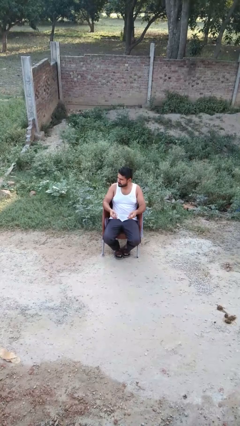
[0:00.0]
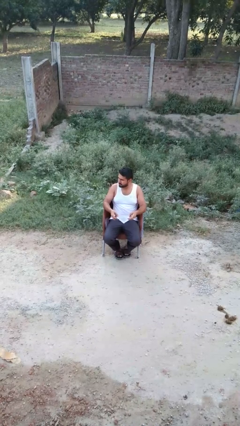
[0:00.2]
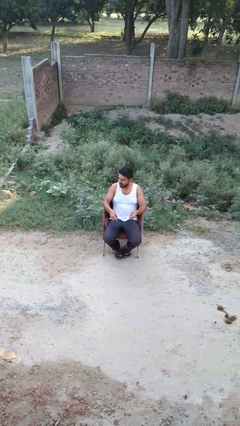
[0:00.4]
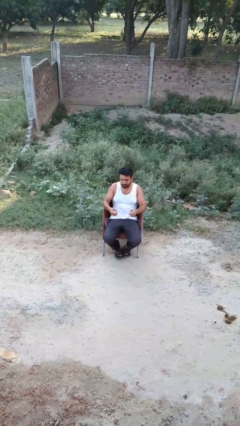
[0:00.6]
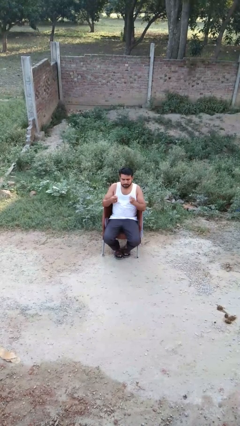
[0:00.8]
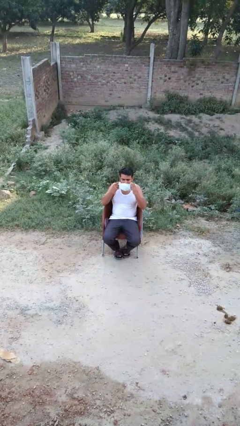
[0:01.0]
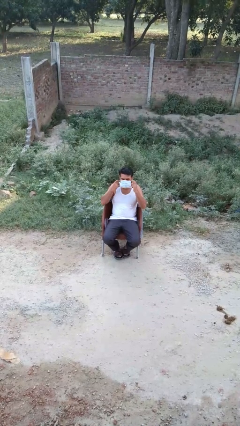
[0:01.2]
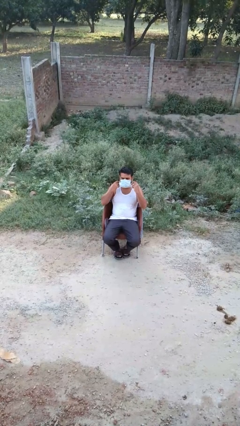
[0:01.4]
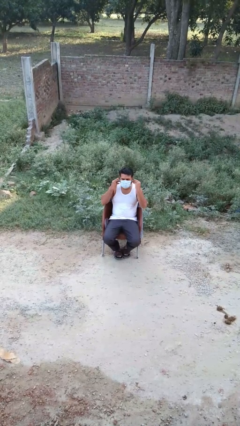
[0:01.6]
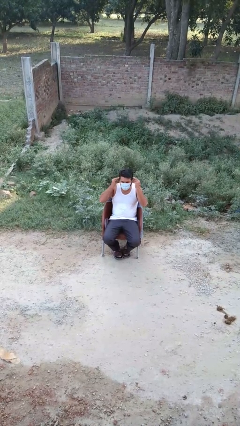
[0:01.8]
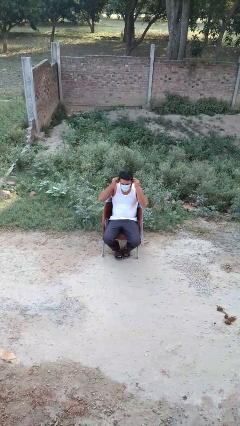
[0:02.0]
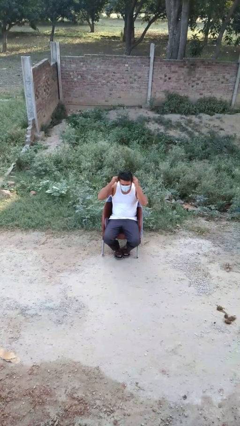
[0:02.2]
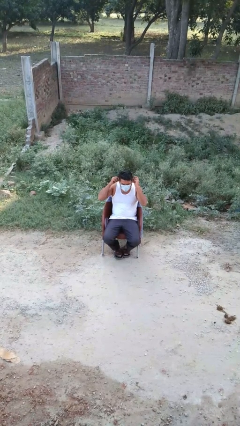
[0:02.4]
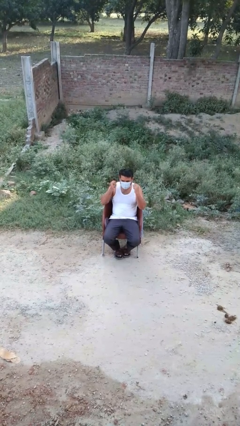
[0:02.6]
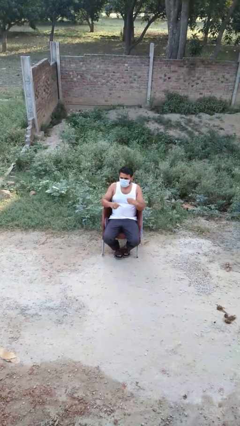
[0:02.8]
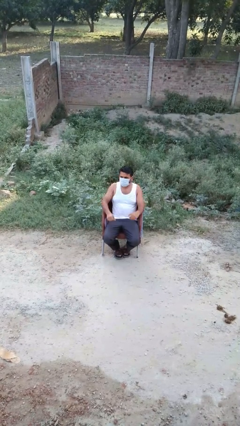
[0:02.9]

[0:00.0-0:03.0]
person puts on facemask

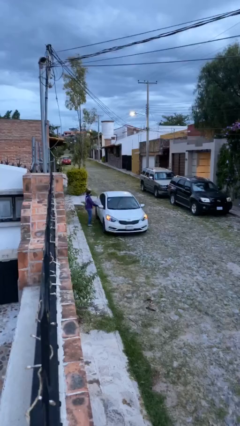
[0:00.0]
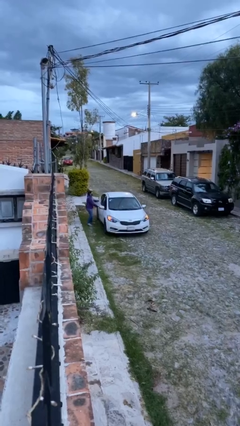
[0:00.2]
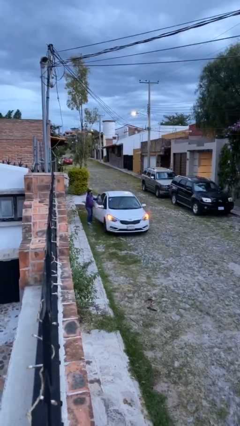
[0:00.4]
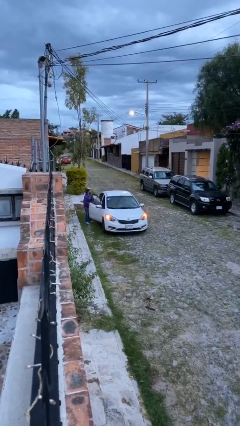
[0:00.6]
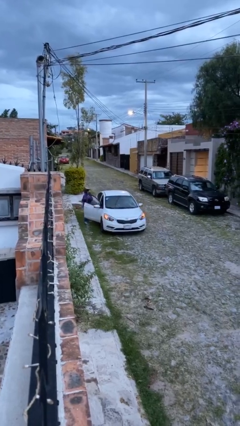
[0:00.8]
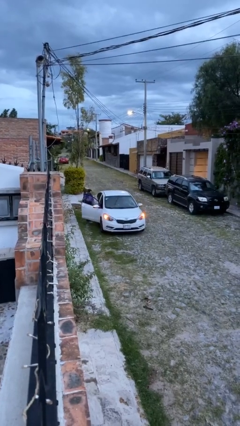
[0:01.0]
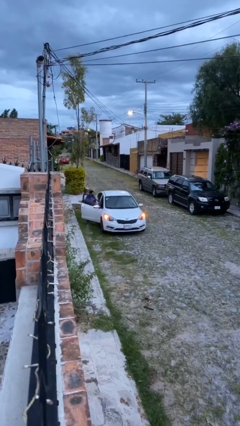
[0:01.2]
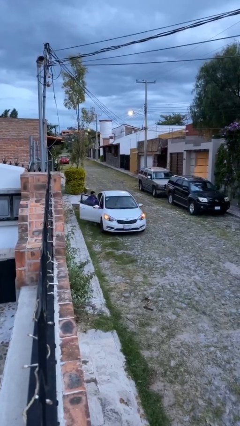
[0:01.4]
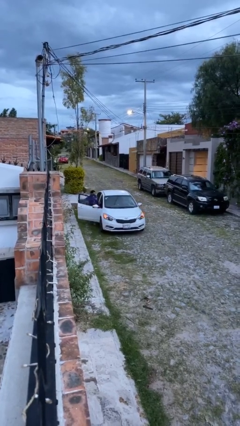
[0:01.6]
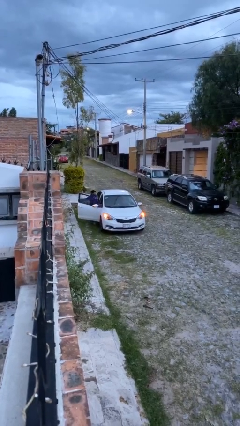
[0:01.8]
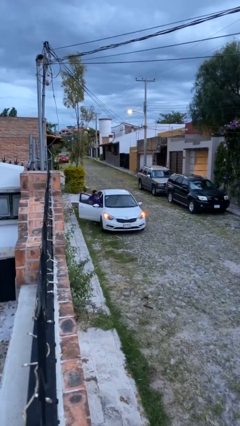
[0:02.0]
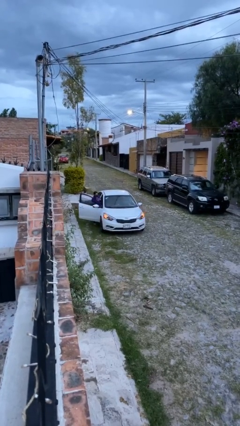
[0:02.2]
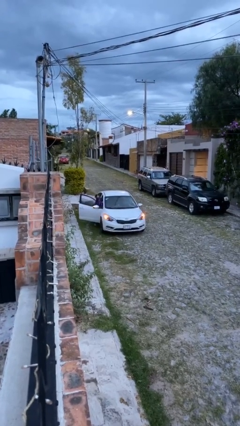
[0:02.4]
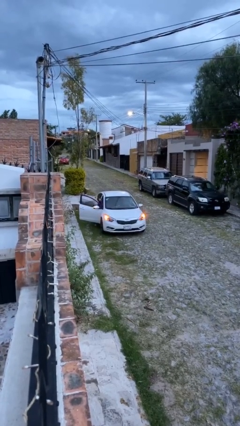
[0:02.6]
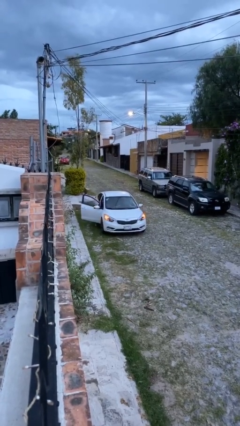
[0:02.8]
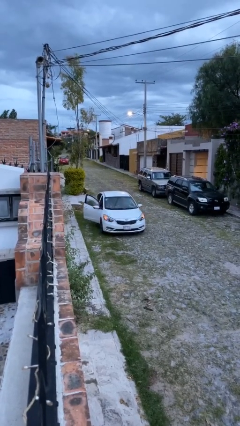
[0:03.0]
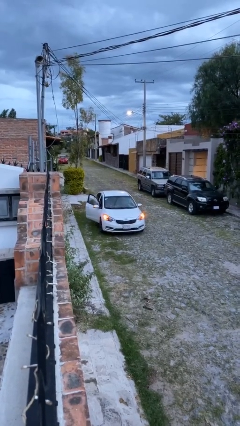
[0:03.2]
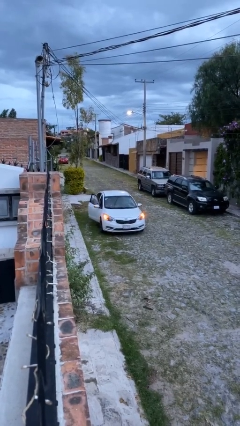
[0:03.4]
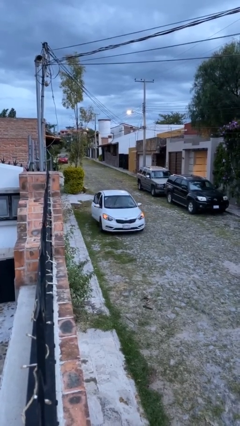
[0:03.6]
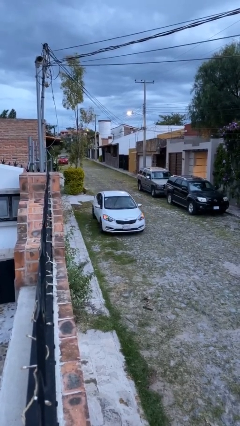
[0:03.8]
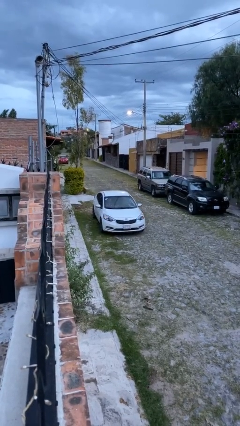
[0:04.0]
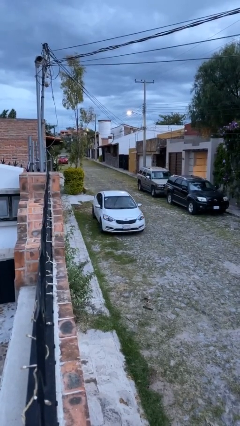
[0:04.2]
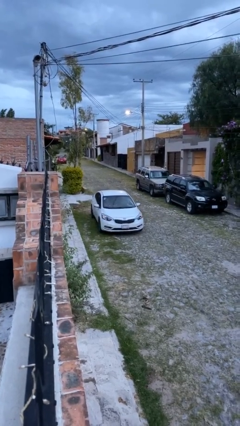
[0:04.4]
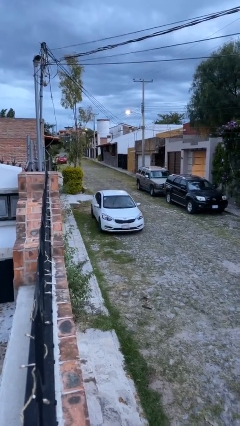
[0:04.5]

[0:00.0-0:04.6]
car picks up person

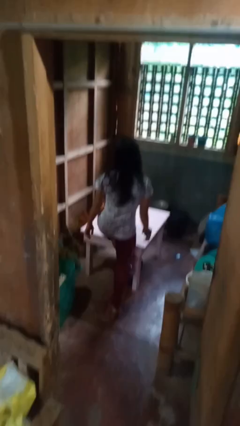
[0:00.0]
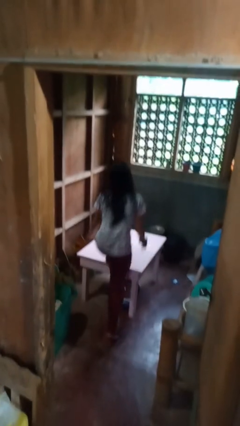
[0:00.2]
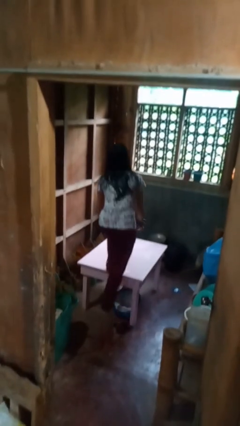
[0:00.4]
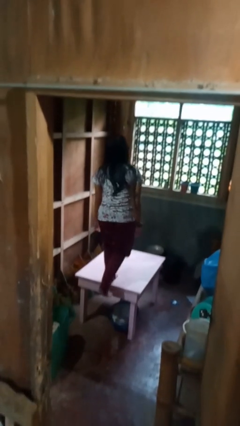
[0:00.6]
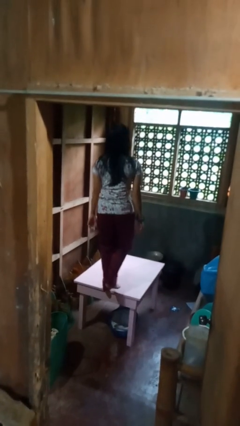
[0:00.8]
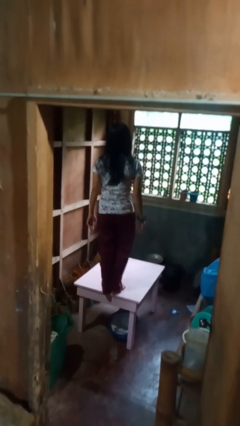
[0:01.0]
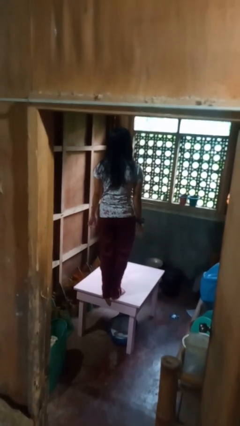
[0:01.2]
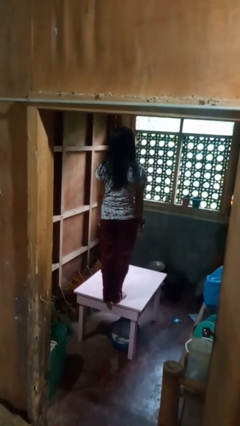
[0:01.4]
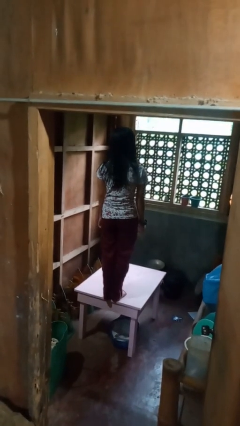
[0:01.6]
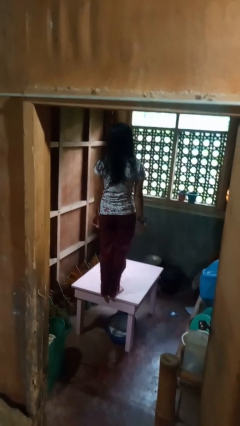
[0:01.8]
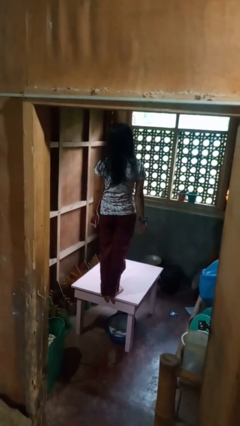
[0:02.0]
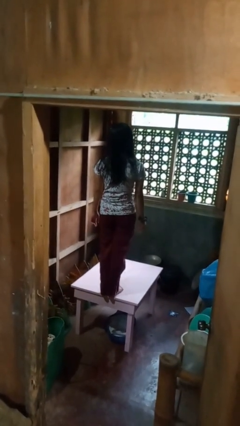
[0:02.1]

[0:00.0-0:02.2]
person climbs on table

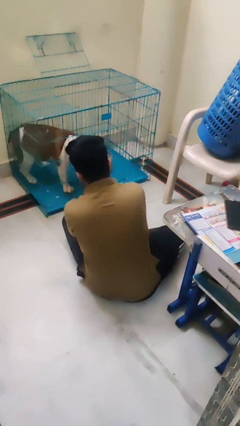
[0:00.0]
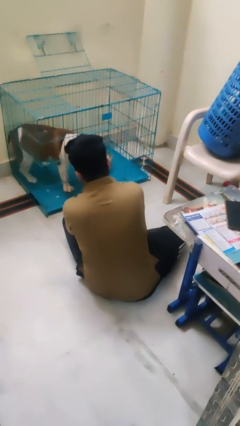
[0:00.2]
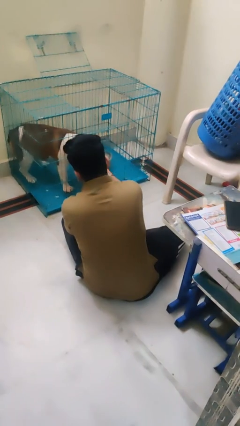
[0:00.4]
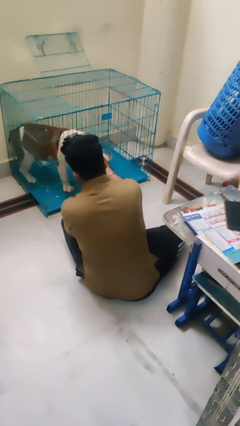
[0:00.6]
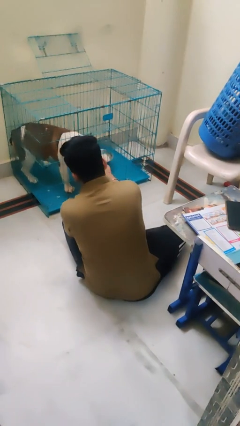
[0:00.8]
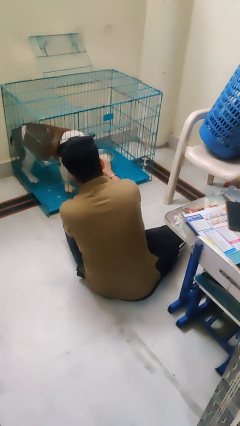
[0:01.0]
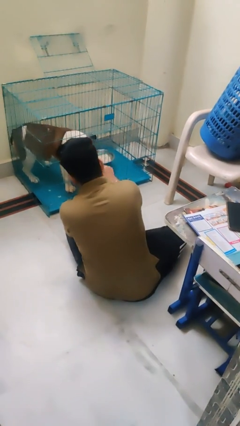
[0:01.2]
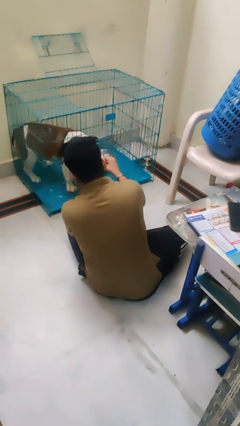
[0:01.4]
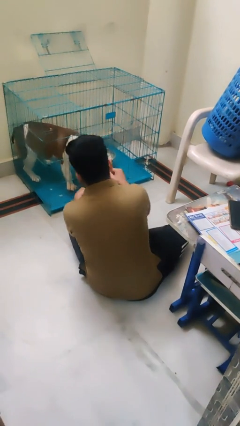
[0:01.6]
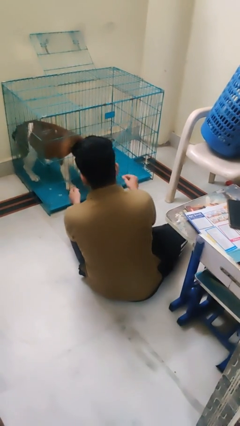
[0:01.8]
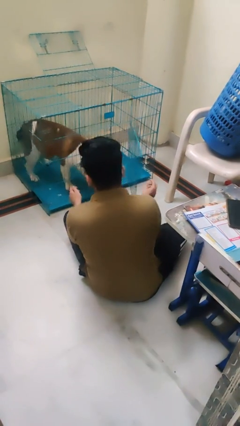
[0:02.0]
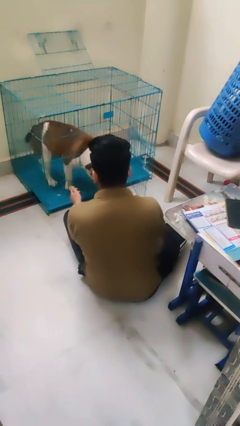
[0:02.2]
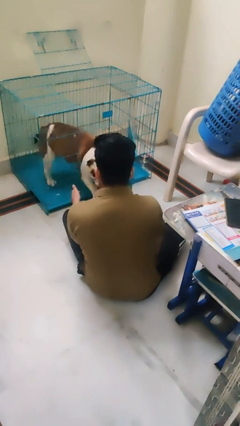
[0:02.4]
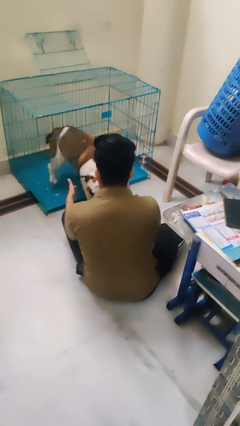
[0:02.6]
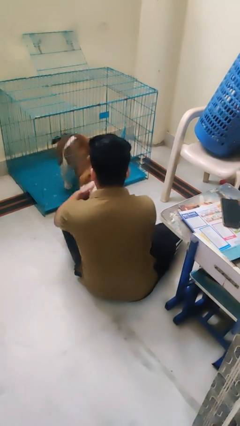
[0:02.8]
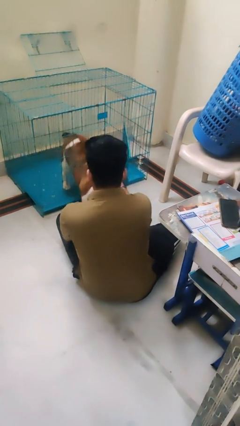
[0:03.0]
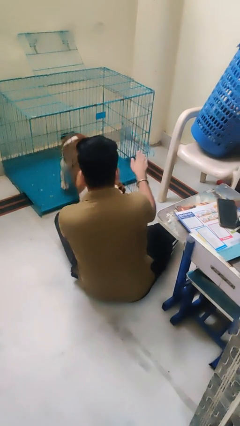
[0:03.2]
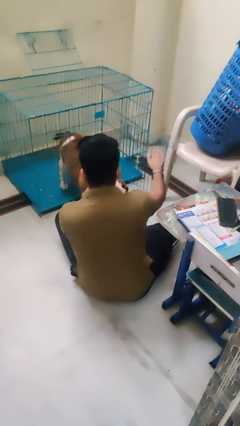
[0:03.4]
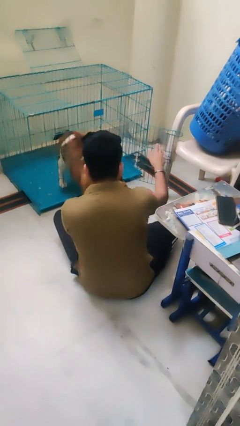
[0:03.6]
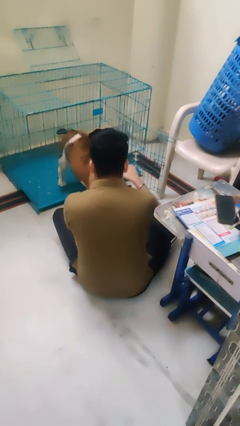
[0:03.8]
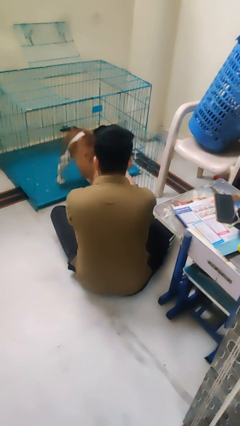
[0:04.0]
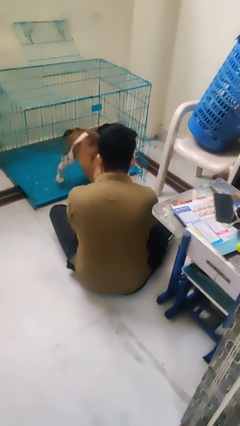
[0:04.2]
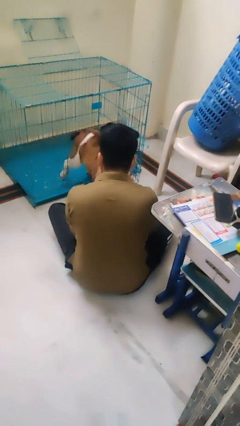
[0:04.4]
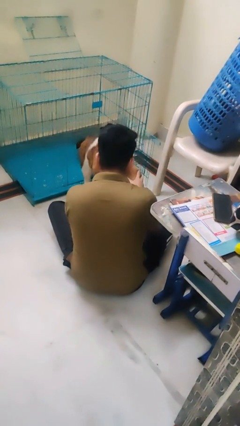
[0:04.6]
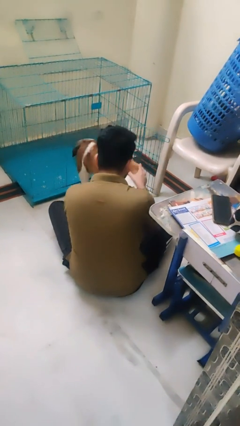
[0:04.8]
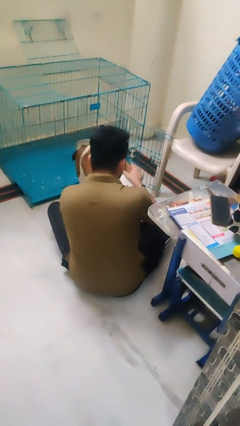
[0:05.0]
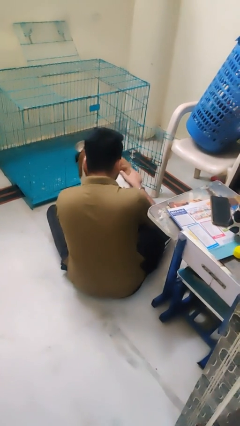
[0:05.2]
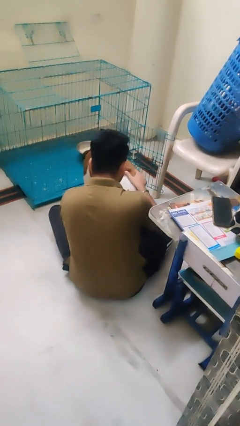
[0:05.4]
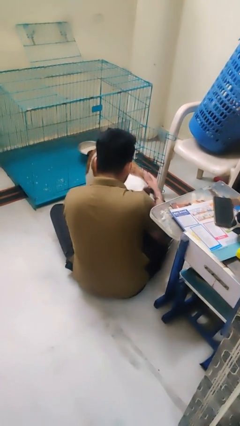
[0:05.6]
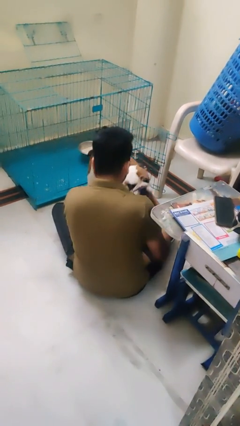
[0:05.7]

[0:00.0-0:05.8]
person uncrates dog

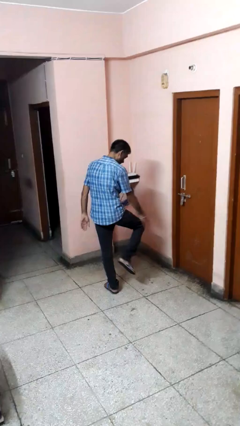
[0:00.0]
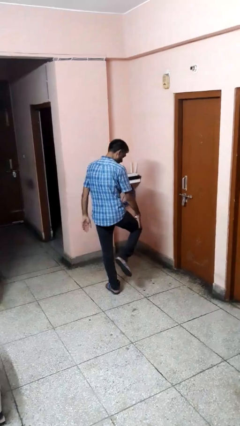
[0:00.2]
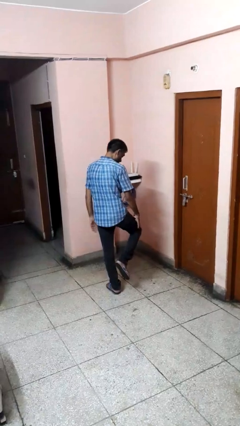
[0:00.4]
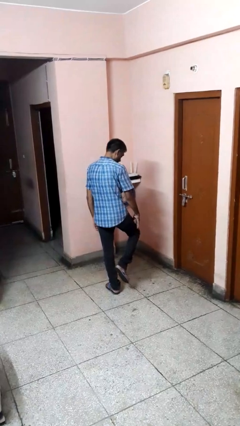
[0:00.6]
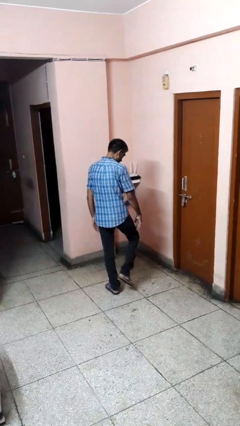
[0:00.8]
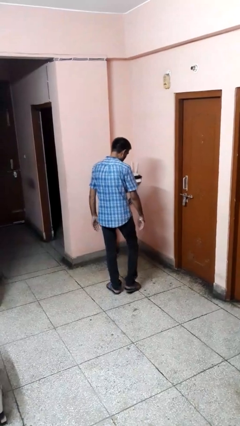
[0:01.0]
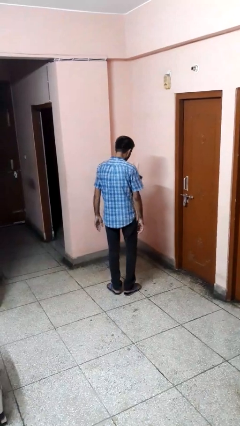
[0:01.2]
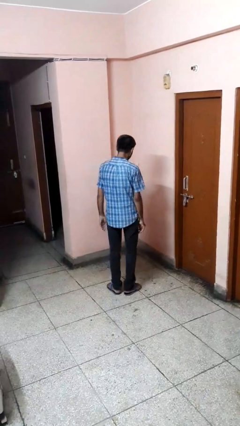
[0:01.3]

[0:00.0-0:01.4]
person swats bug

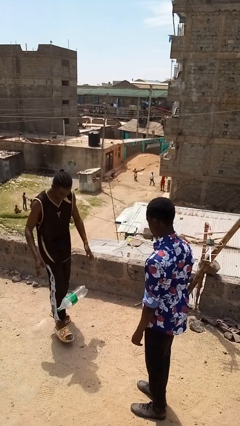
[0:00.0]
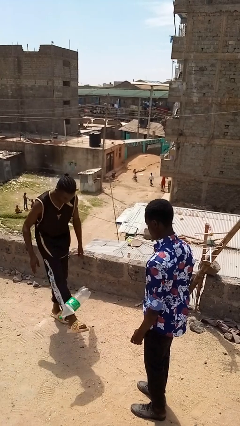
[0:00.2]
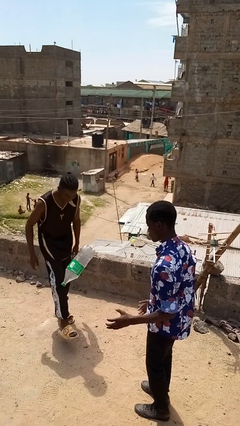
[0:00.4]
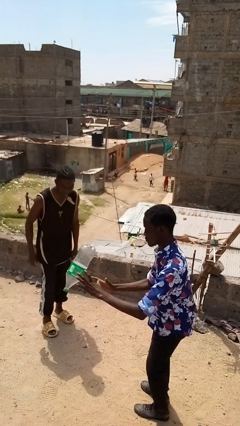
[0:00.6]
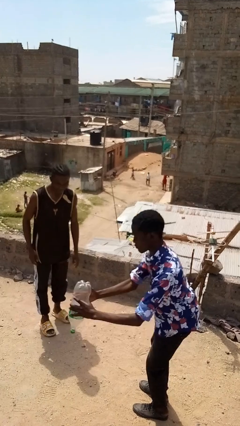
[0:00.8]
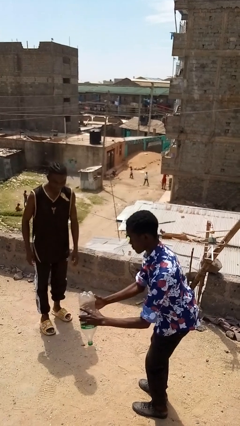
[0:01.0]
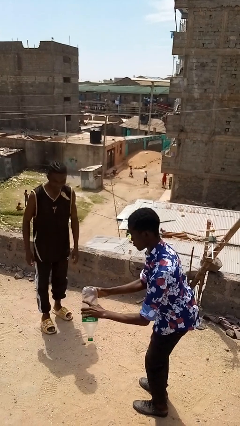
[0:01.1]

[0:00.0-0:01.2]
person kicks object to person
